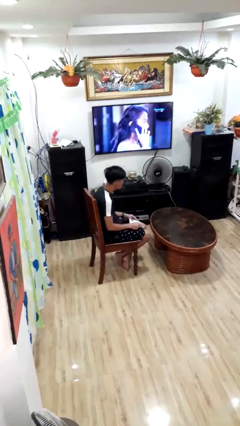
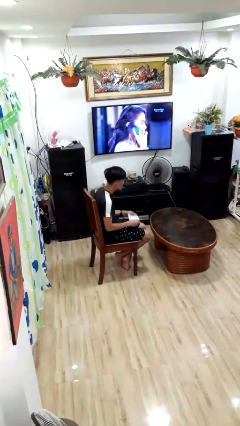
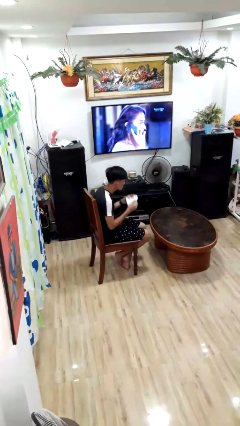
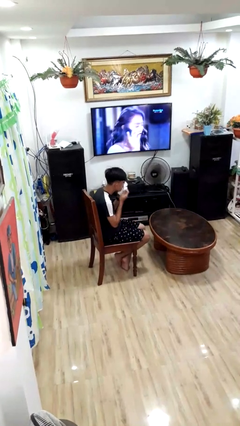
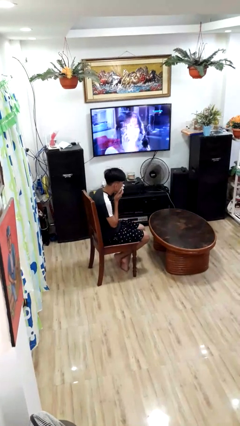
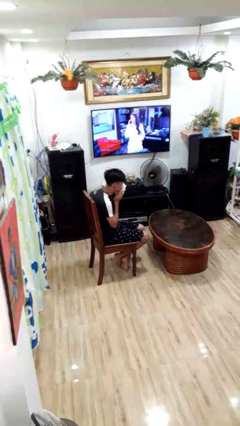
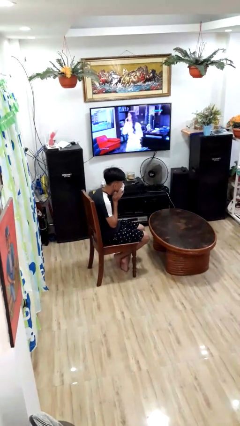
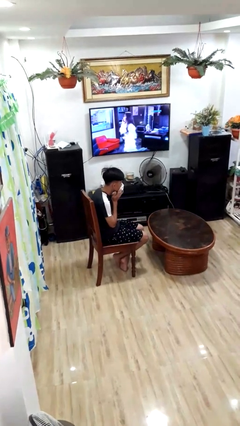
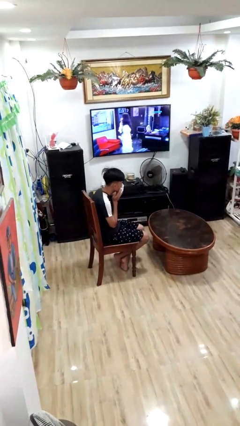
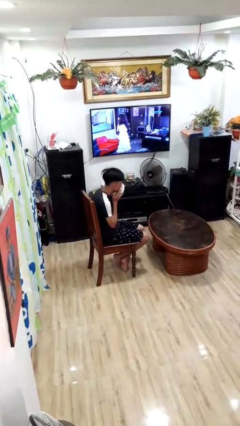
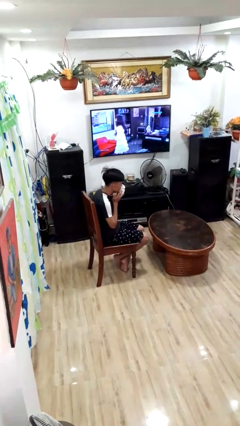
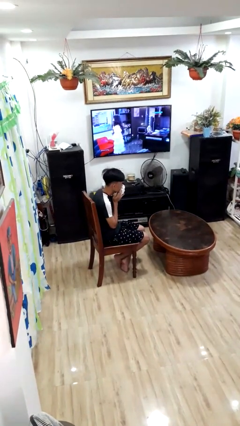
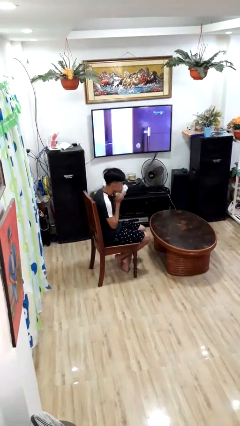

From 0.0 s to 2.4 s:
person wipes mouth with napkin

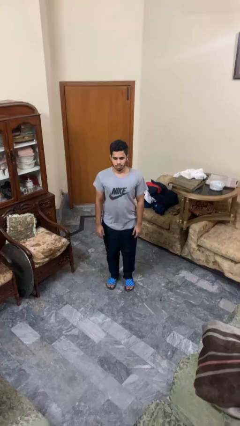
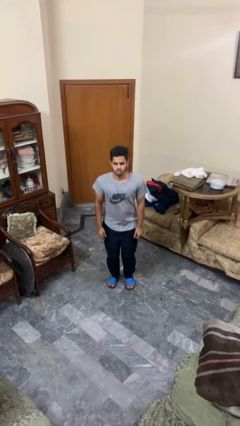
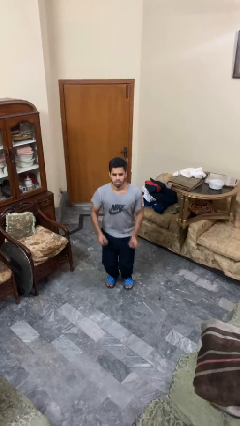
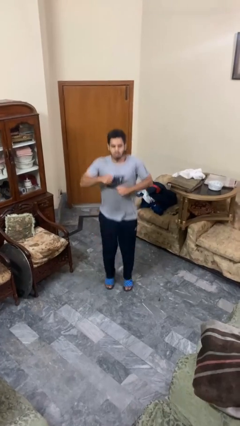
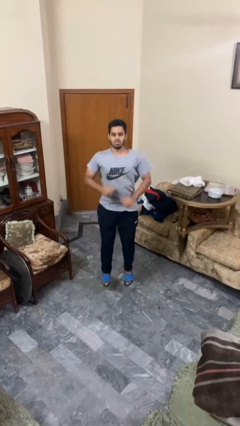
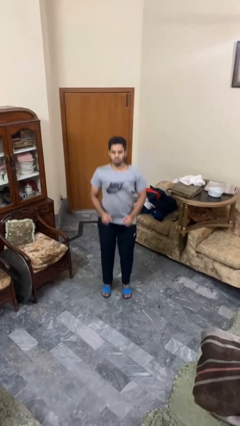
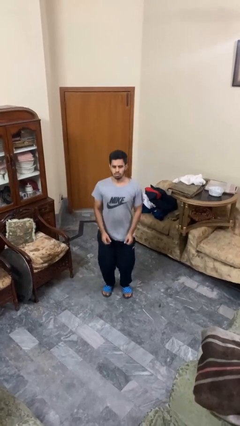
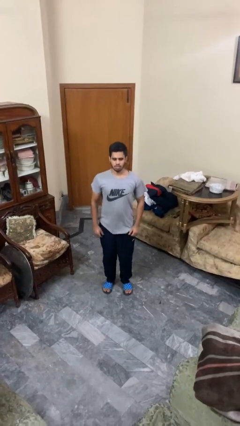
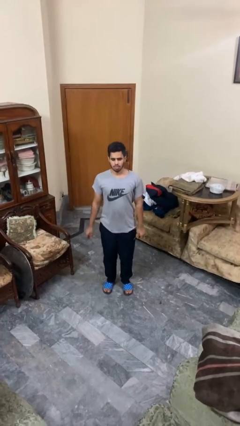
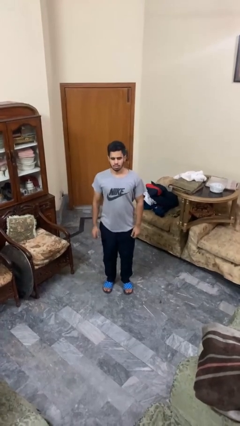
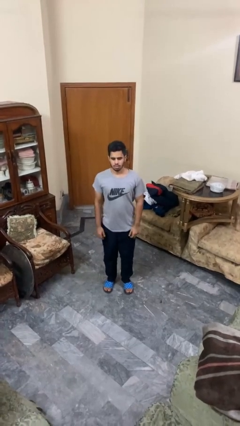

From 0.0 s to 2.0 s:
person jumps

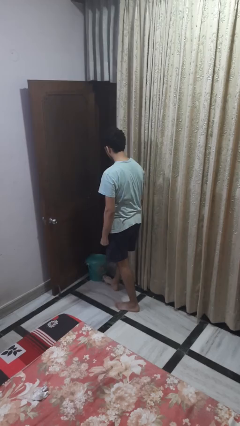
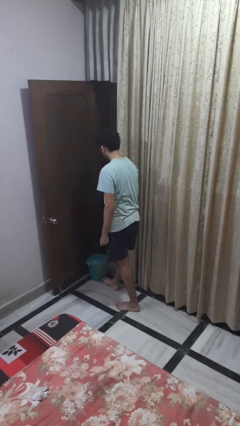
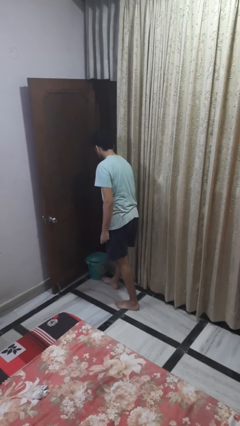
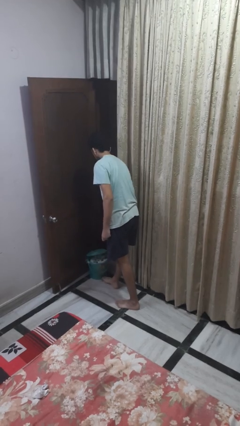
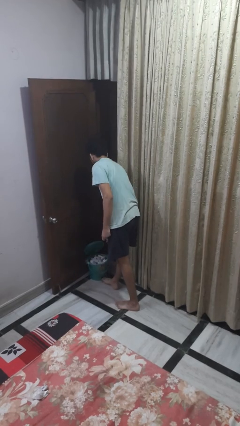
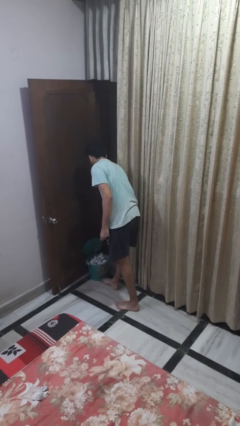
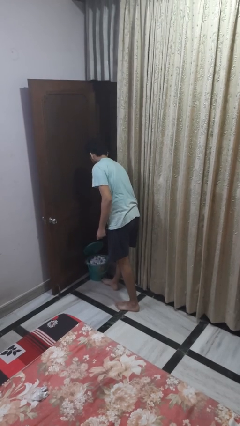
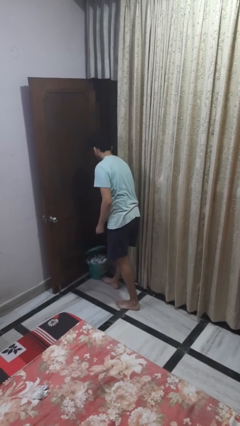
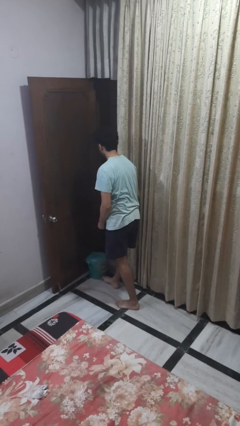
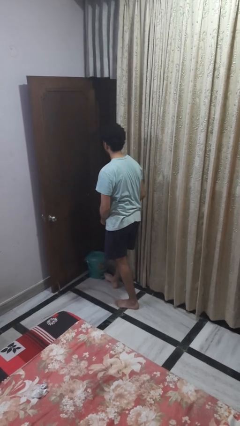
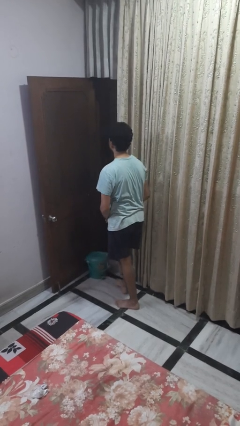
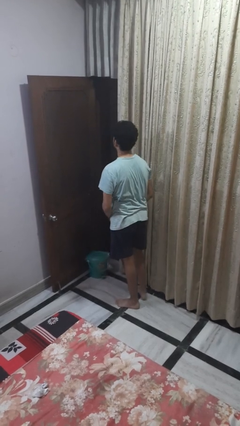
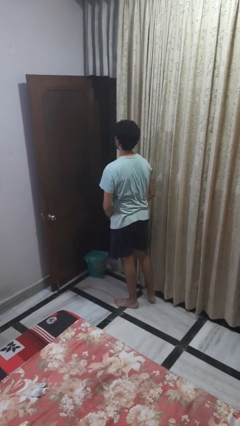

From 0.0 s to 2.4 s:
person discards trash

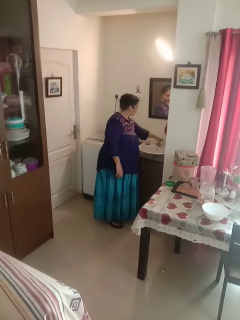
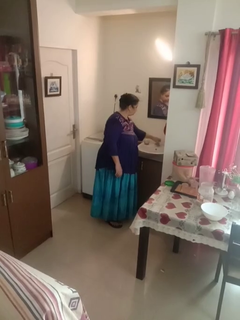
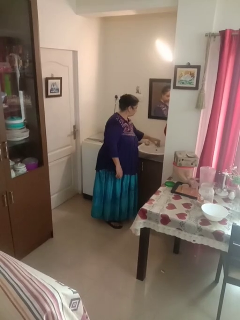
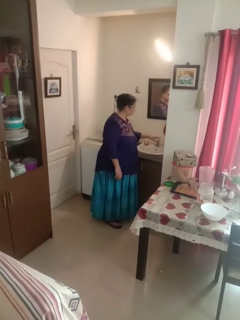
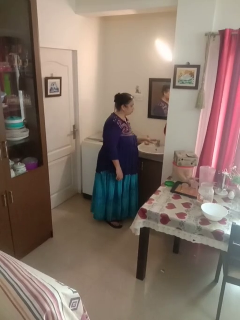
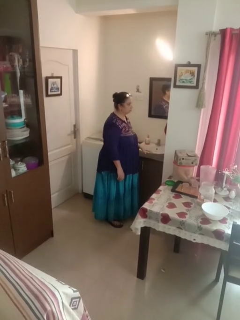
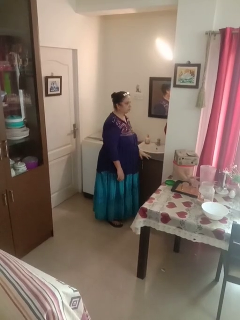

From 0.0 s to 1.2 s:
person turns off faucet

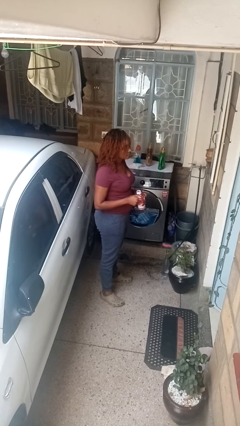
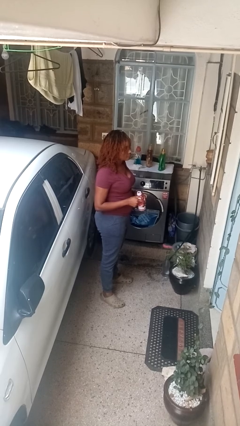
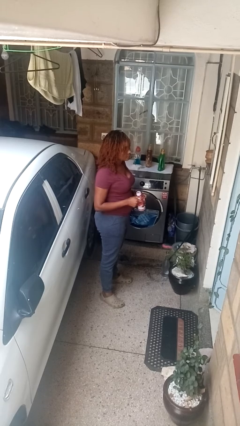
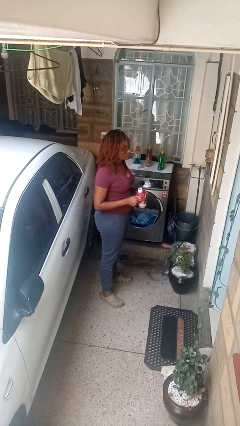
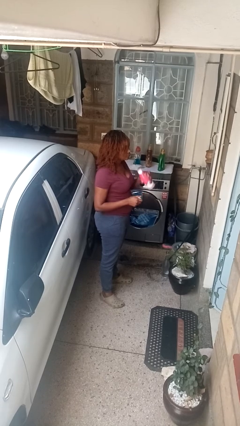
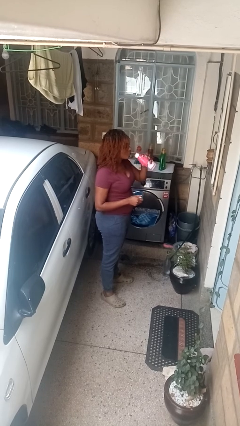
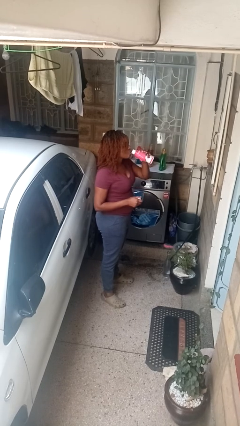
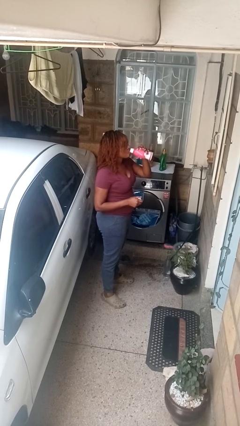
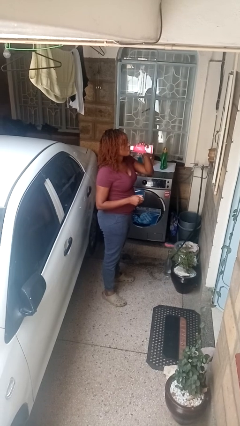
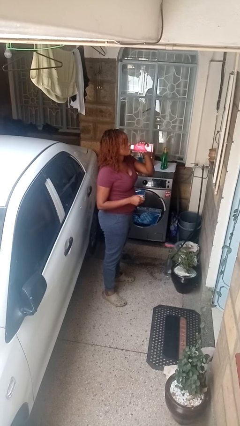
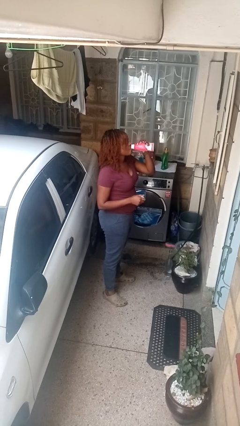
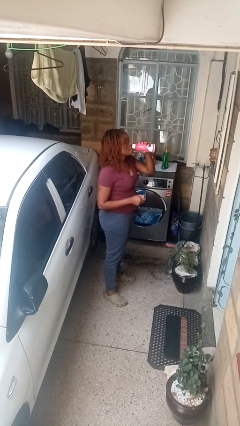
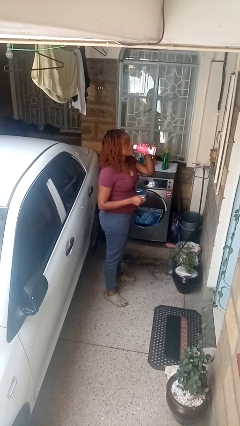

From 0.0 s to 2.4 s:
person drinks from beverage can

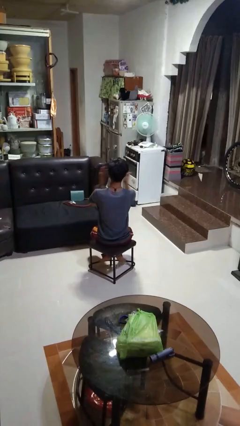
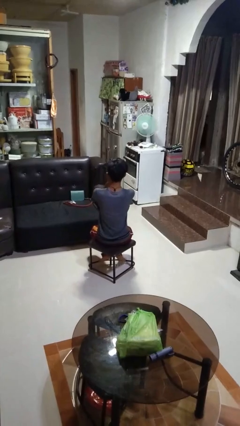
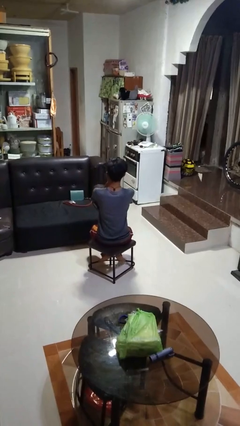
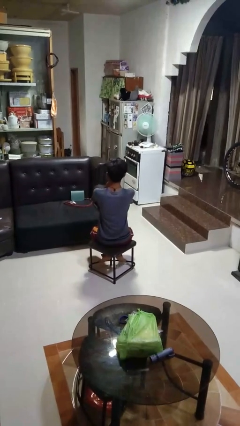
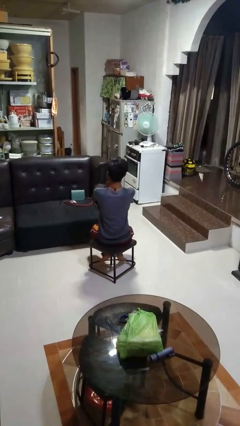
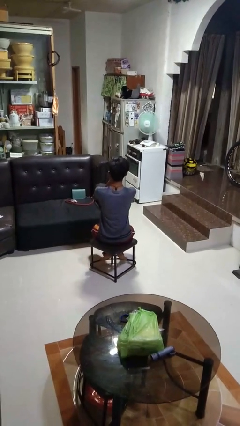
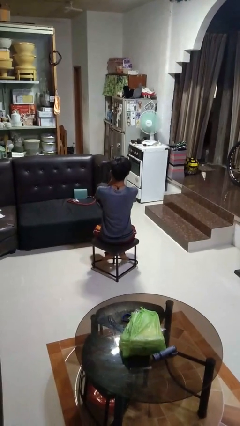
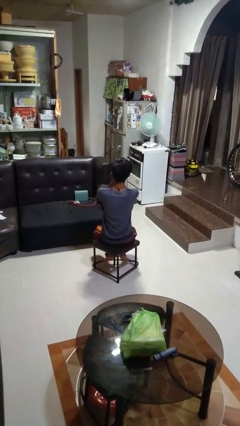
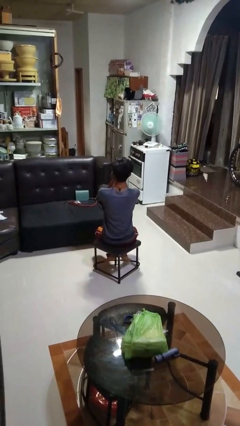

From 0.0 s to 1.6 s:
person covers face with hands

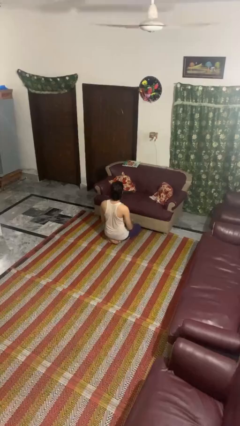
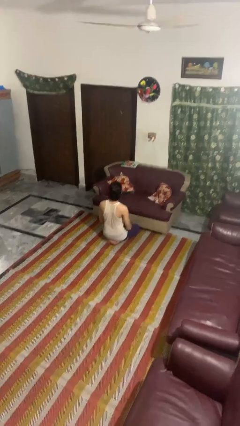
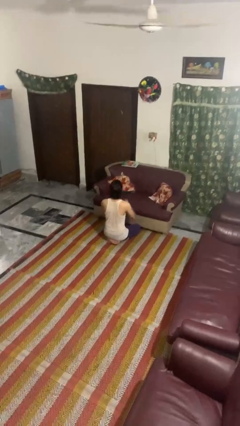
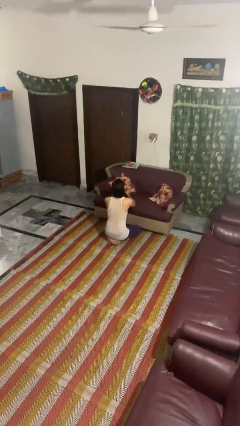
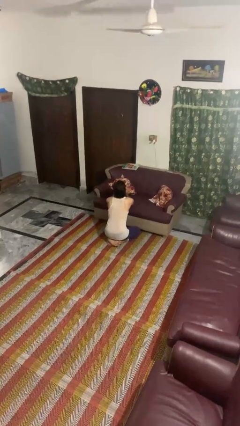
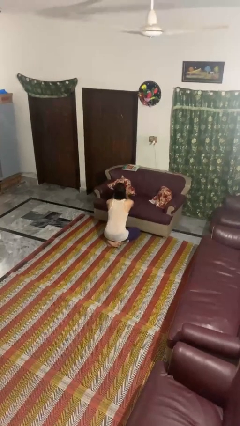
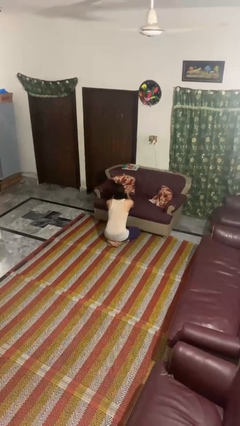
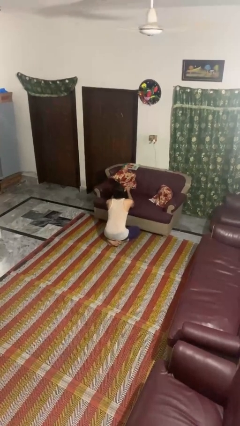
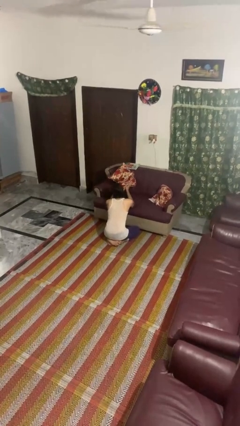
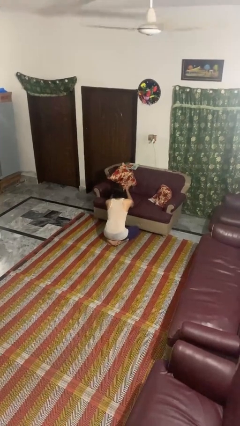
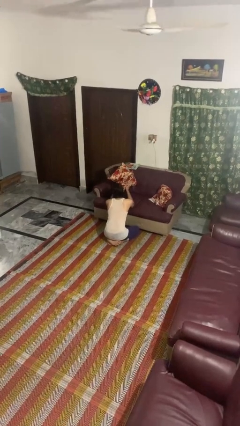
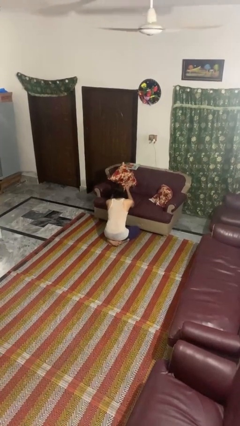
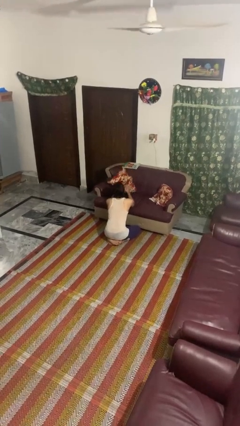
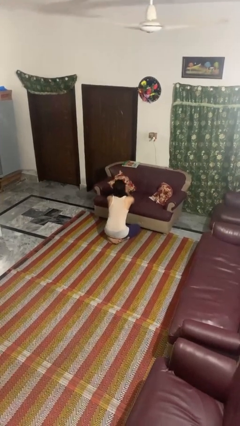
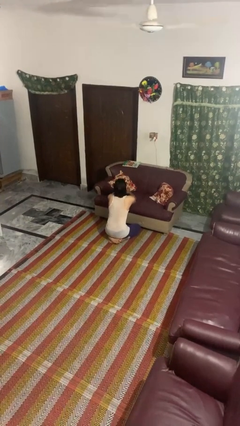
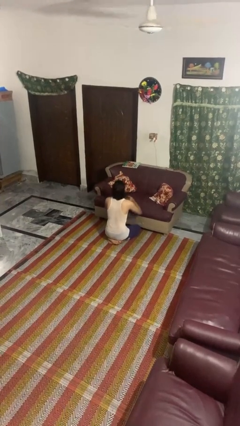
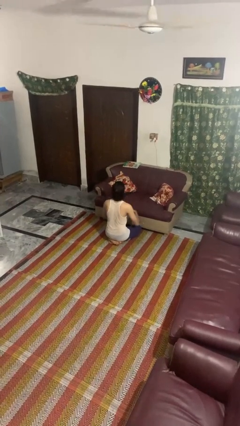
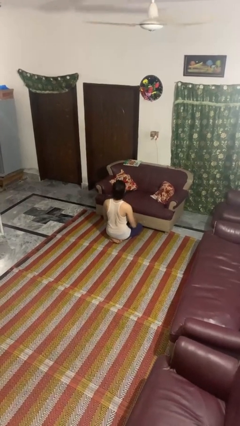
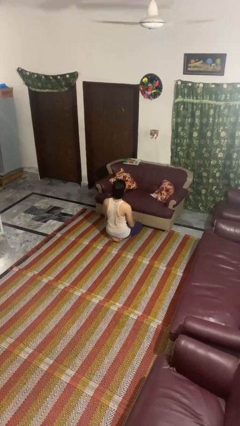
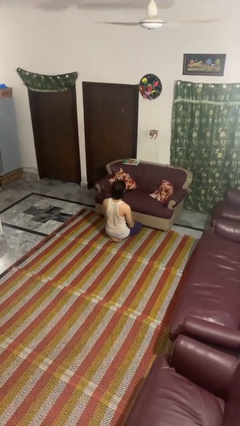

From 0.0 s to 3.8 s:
person searches in couch

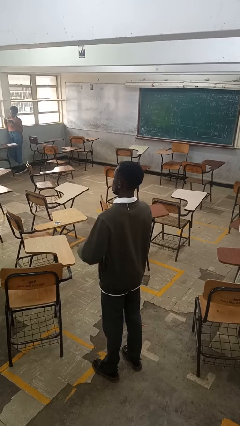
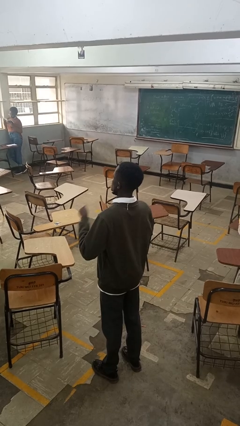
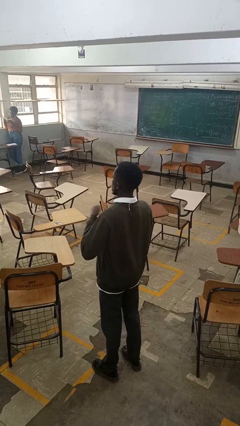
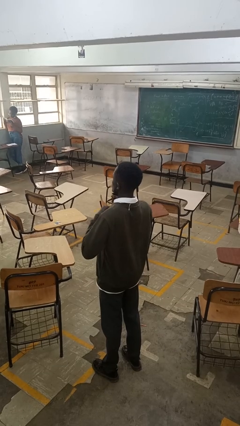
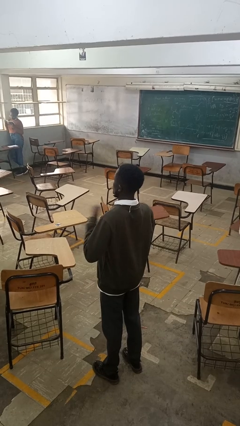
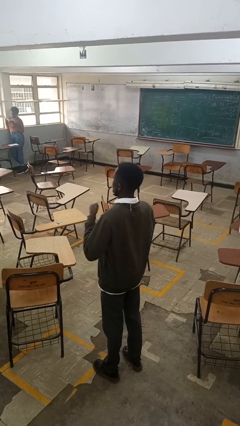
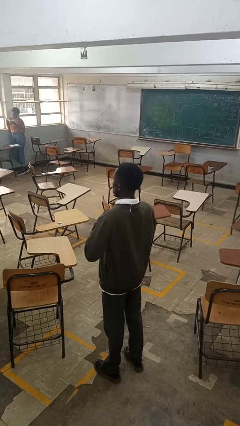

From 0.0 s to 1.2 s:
person drums on chest

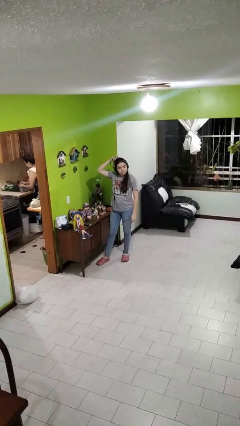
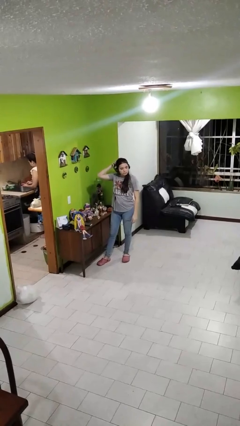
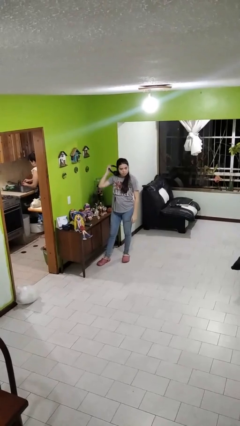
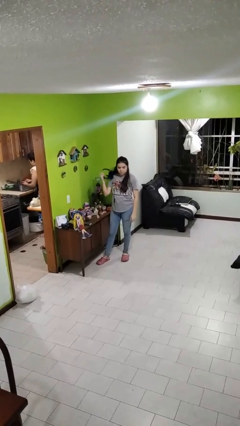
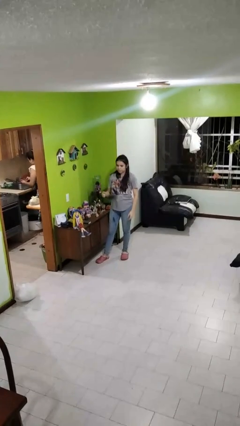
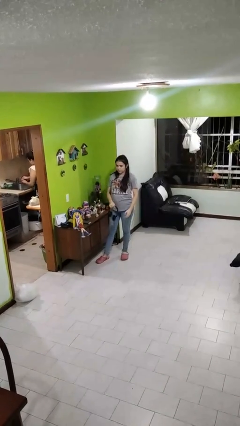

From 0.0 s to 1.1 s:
person takes off headphones
